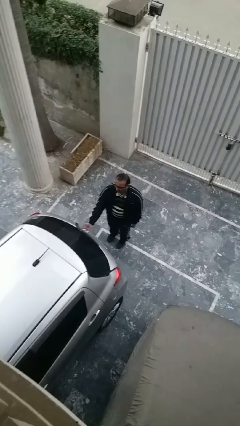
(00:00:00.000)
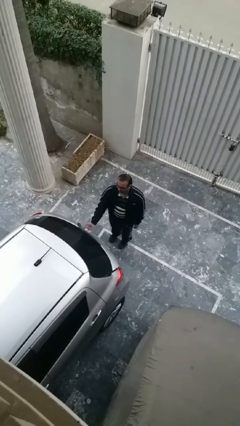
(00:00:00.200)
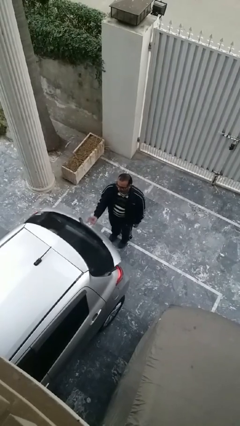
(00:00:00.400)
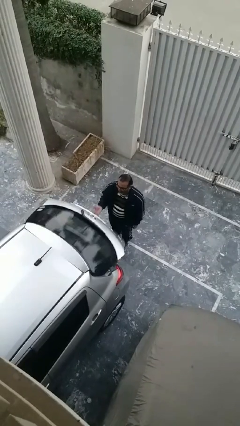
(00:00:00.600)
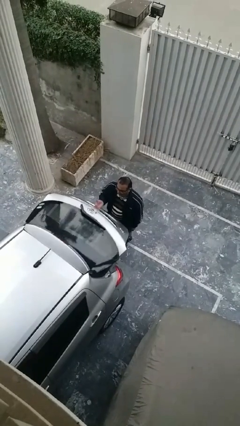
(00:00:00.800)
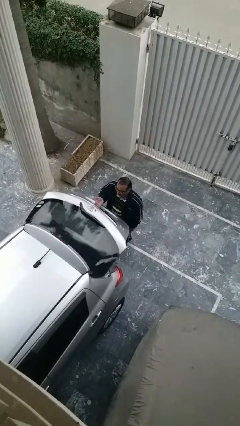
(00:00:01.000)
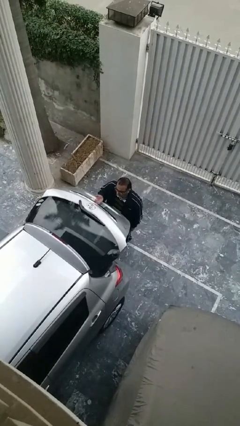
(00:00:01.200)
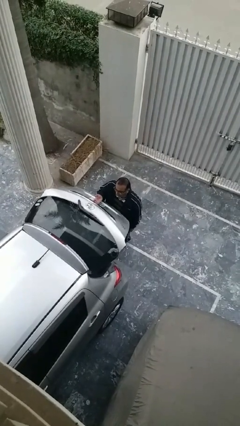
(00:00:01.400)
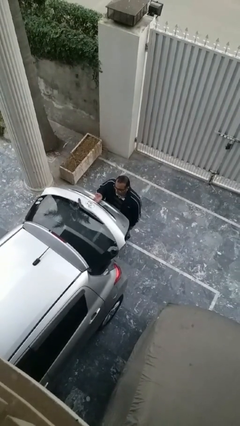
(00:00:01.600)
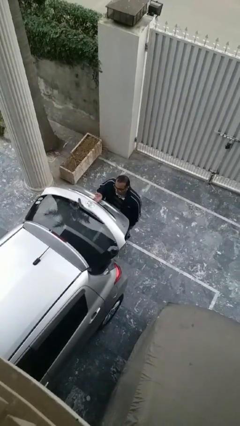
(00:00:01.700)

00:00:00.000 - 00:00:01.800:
person opens car trunk

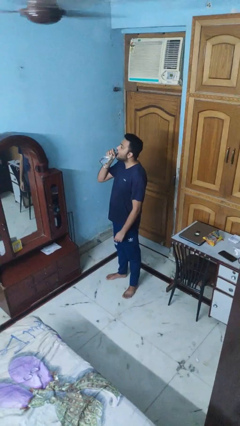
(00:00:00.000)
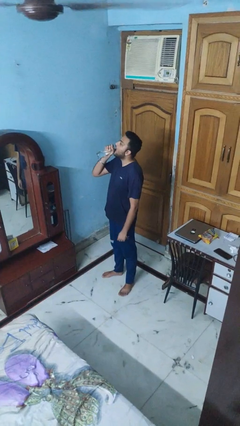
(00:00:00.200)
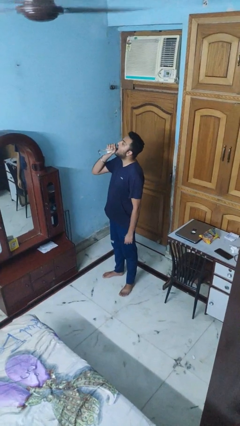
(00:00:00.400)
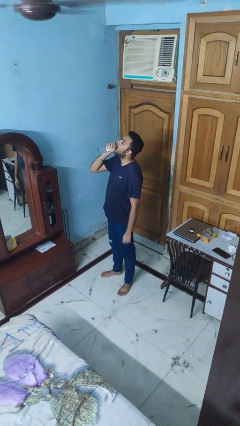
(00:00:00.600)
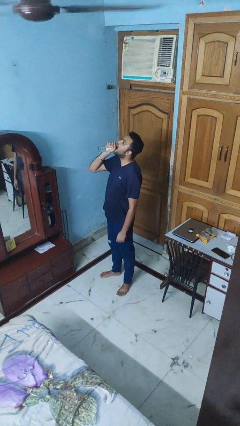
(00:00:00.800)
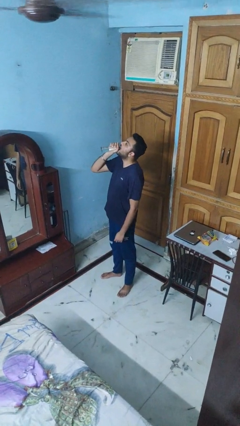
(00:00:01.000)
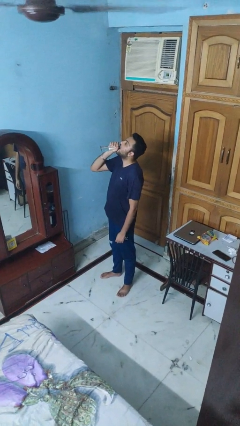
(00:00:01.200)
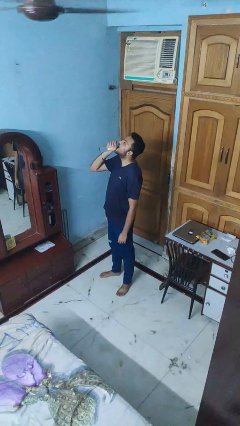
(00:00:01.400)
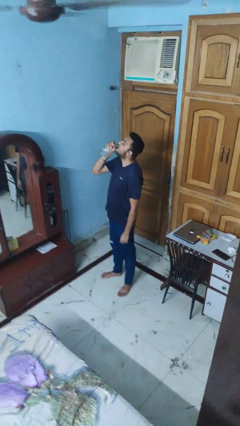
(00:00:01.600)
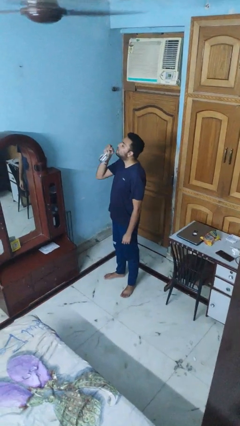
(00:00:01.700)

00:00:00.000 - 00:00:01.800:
person drinks from bottle

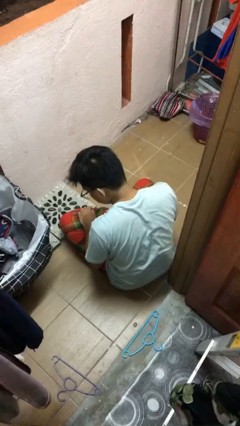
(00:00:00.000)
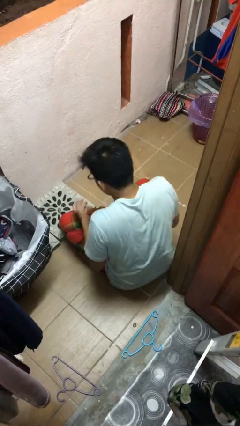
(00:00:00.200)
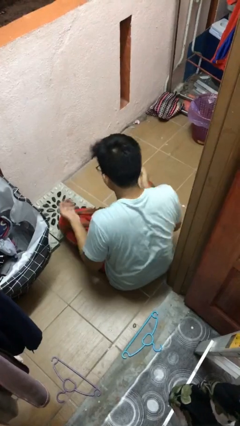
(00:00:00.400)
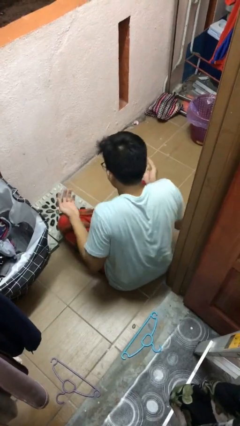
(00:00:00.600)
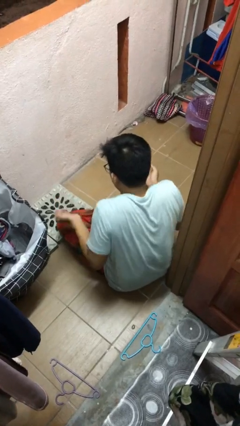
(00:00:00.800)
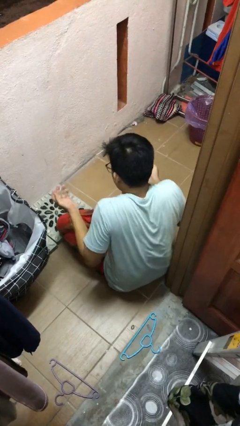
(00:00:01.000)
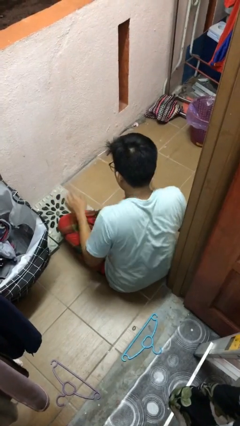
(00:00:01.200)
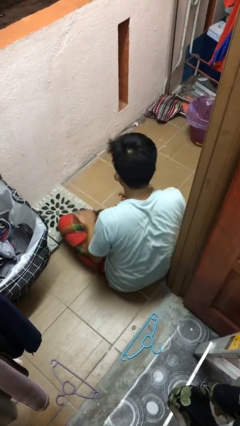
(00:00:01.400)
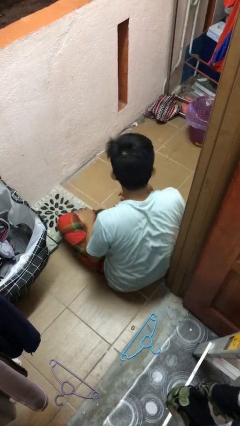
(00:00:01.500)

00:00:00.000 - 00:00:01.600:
person shrugs

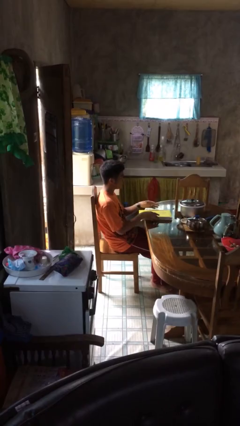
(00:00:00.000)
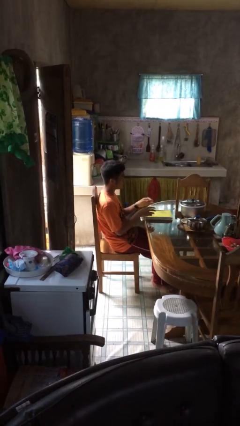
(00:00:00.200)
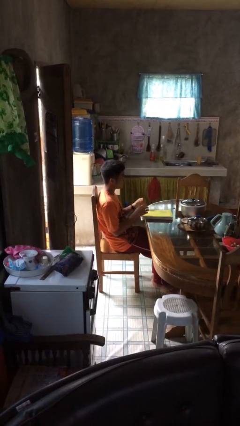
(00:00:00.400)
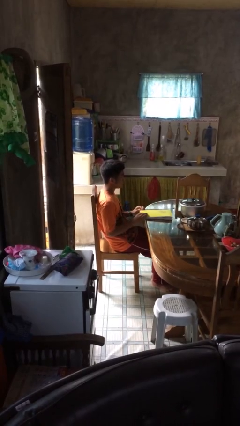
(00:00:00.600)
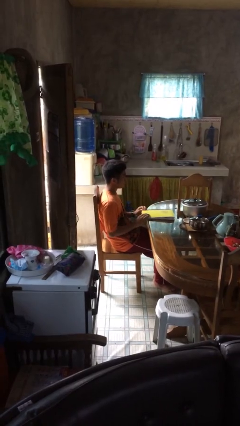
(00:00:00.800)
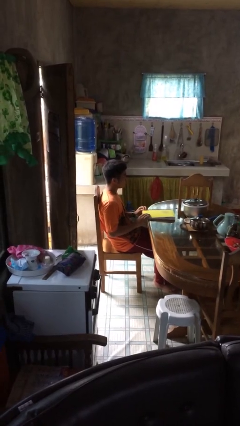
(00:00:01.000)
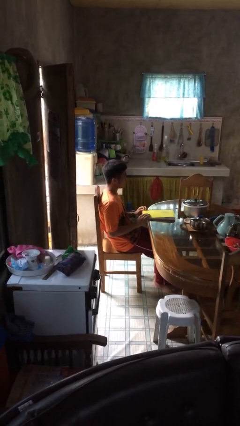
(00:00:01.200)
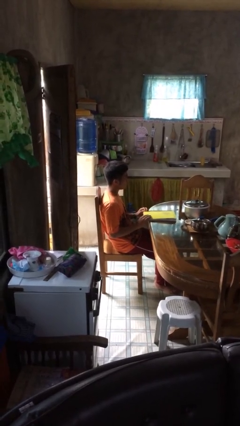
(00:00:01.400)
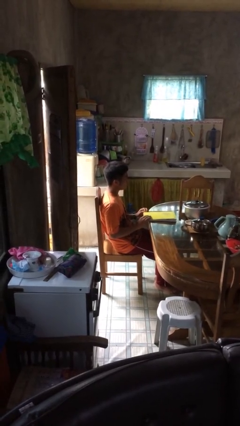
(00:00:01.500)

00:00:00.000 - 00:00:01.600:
person puts down object on table

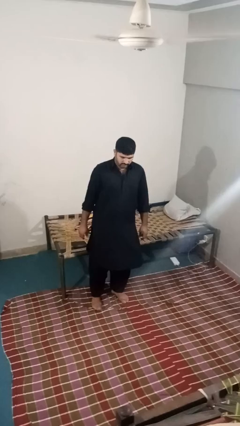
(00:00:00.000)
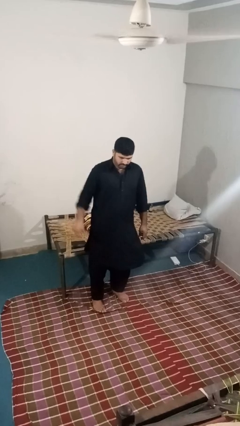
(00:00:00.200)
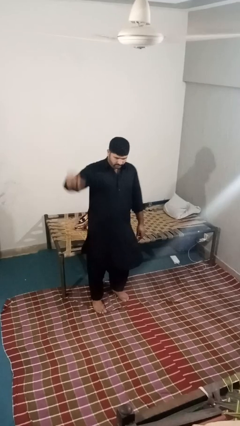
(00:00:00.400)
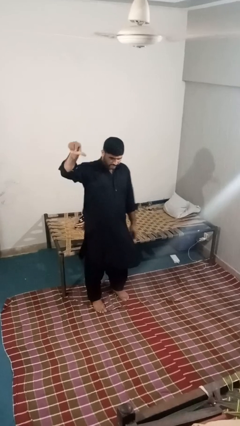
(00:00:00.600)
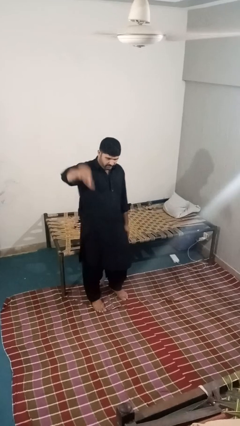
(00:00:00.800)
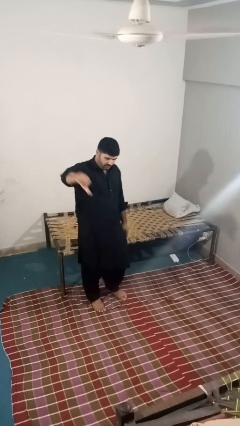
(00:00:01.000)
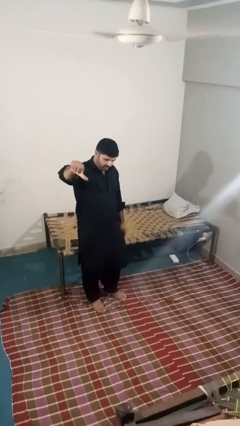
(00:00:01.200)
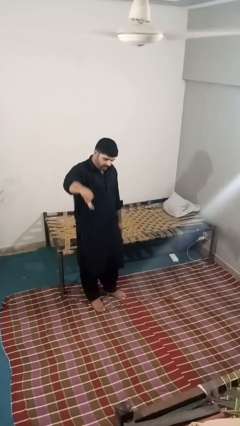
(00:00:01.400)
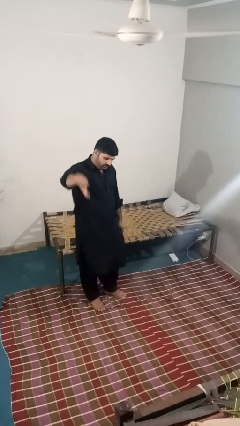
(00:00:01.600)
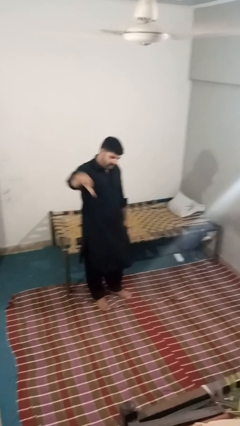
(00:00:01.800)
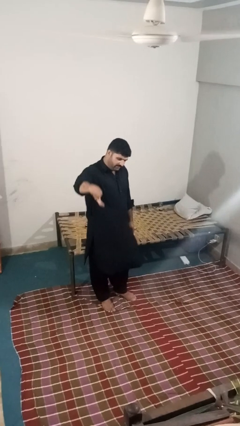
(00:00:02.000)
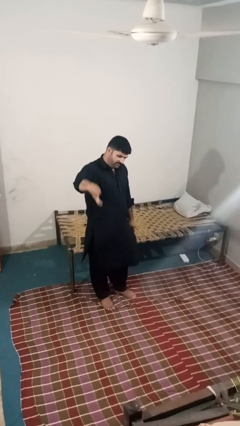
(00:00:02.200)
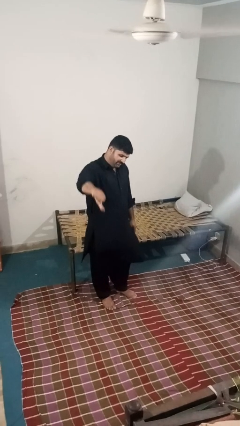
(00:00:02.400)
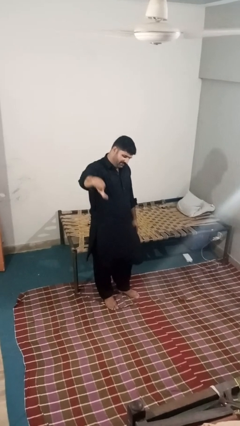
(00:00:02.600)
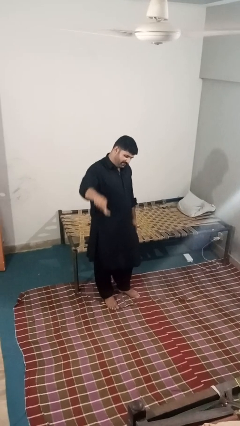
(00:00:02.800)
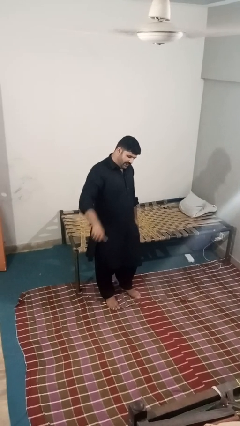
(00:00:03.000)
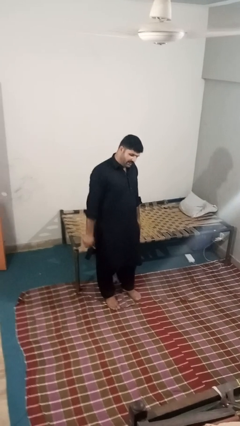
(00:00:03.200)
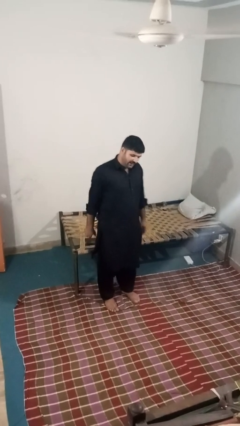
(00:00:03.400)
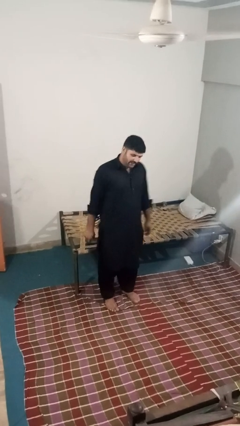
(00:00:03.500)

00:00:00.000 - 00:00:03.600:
person gestures thumbs down

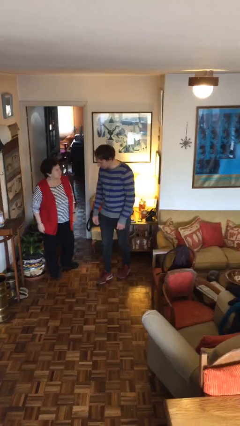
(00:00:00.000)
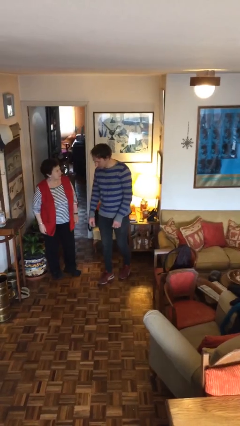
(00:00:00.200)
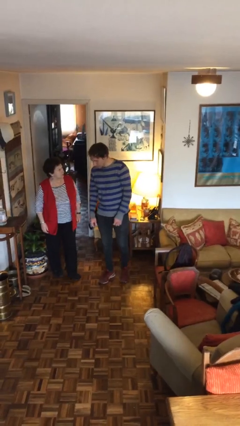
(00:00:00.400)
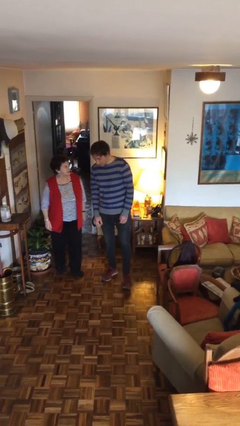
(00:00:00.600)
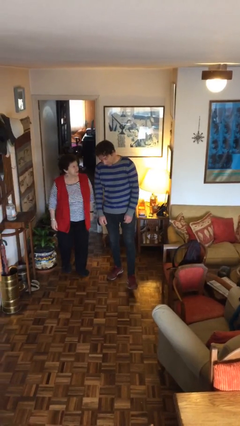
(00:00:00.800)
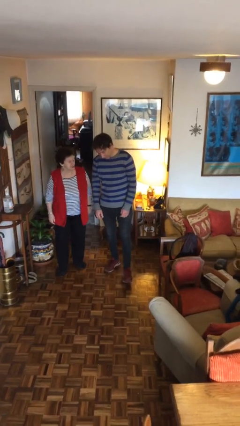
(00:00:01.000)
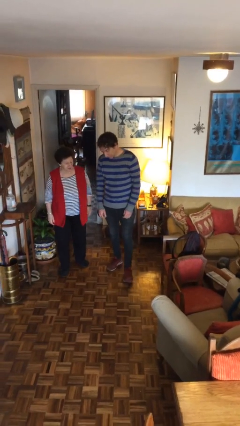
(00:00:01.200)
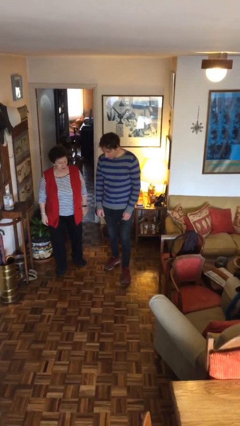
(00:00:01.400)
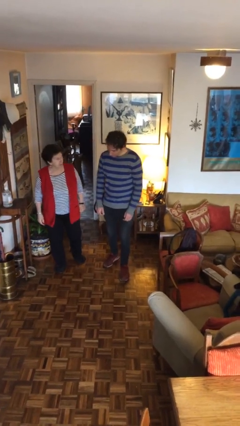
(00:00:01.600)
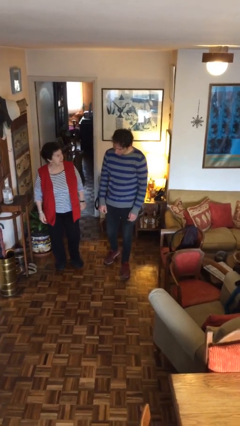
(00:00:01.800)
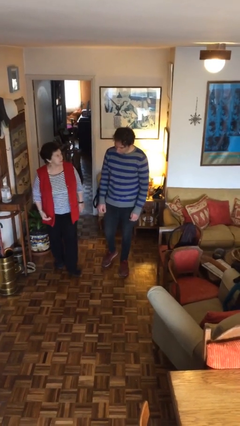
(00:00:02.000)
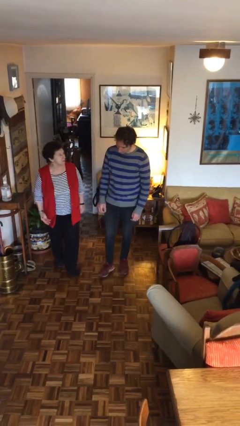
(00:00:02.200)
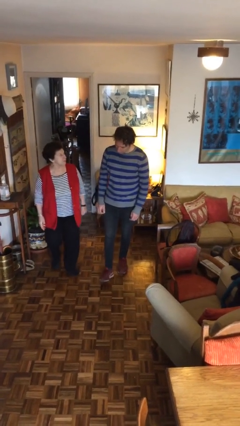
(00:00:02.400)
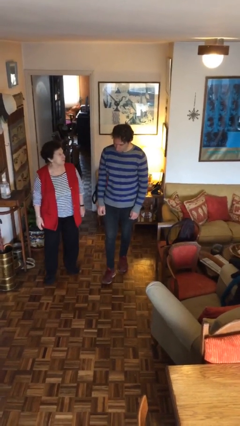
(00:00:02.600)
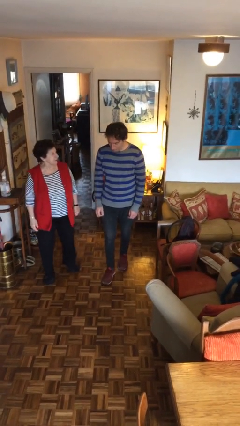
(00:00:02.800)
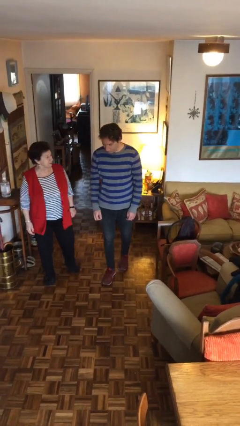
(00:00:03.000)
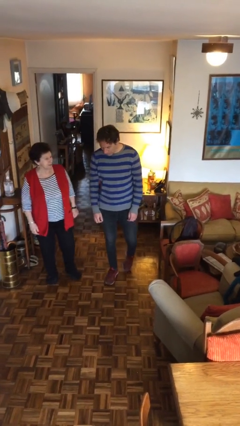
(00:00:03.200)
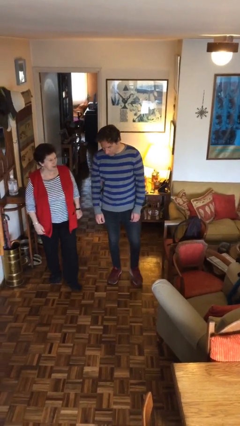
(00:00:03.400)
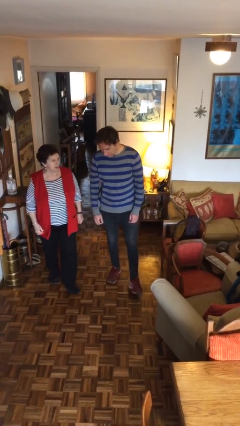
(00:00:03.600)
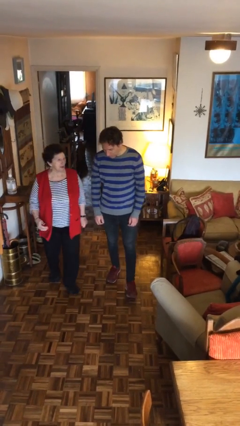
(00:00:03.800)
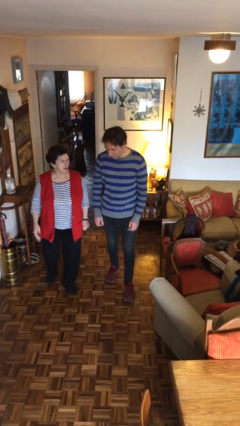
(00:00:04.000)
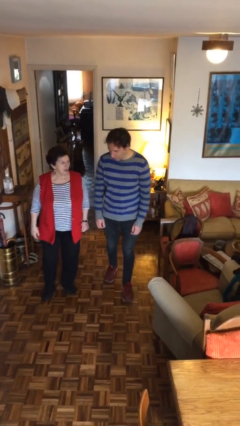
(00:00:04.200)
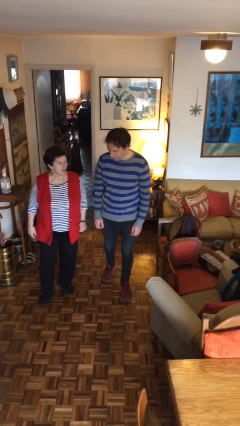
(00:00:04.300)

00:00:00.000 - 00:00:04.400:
person talks to person

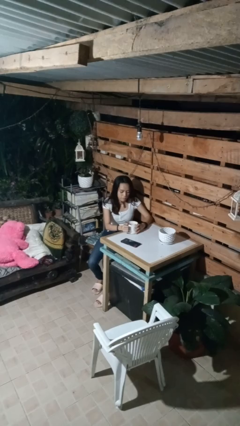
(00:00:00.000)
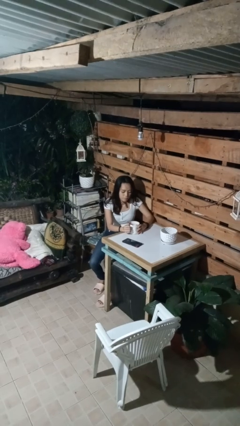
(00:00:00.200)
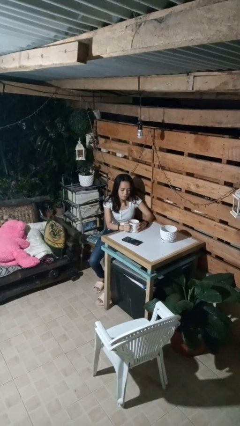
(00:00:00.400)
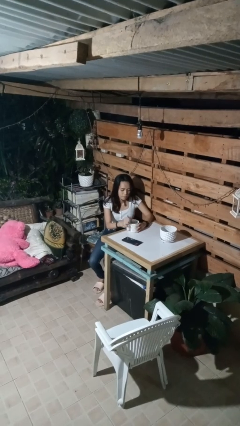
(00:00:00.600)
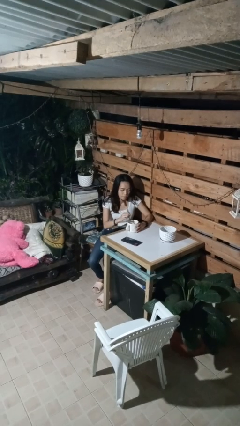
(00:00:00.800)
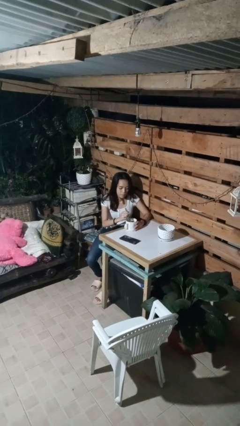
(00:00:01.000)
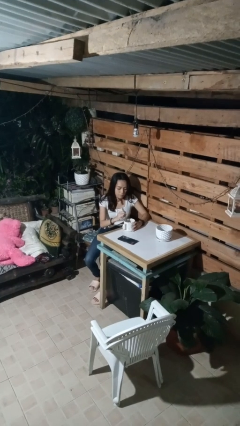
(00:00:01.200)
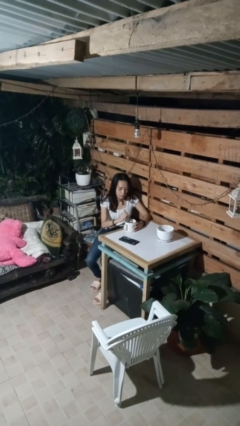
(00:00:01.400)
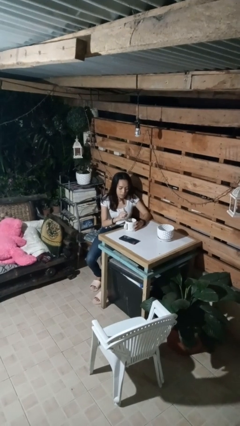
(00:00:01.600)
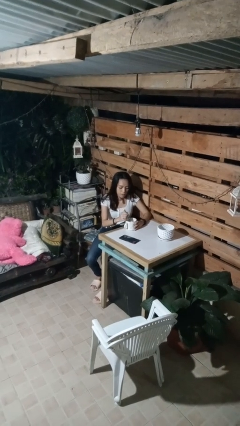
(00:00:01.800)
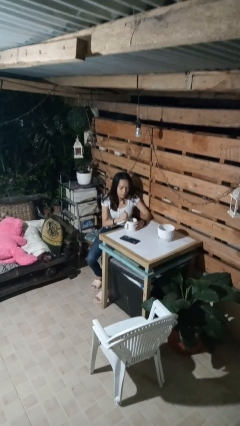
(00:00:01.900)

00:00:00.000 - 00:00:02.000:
person stirs mug
